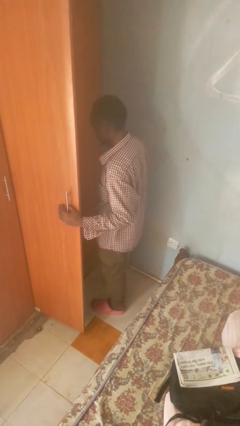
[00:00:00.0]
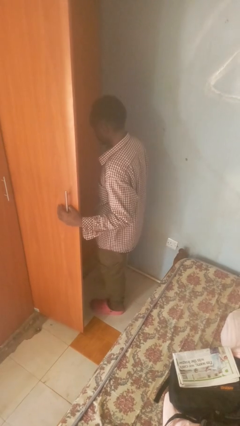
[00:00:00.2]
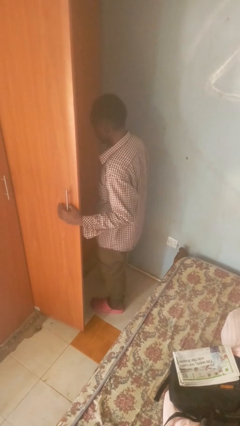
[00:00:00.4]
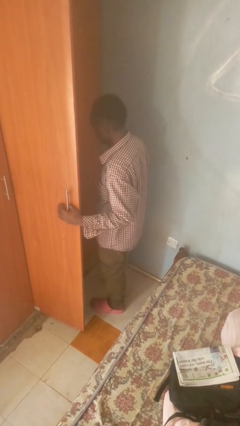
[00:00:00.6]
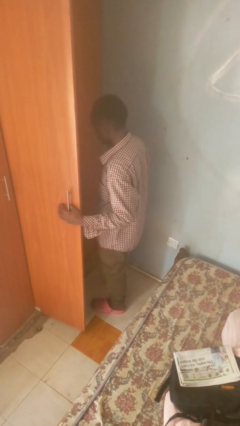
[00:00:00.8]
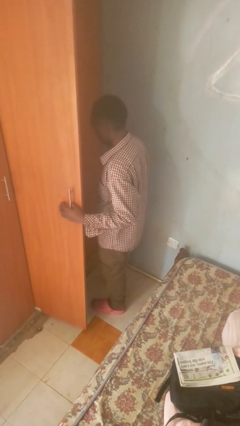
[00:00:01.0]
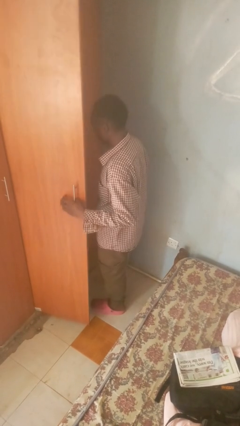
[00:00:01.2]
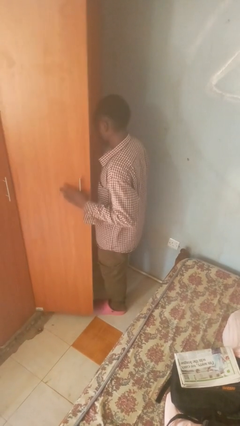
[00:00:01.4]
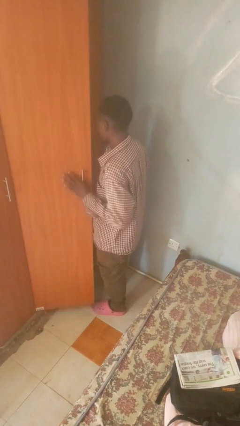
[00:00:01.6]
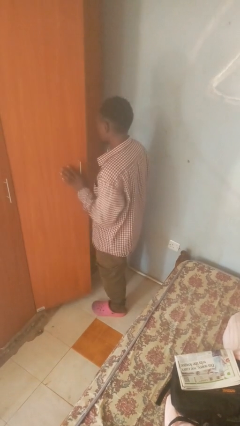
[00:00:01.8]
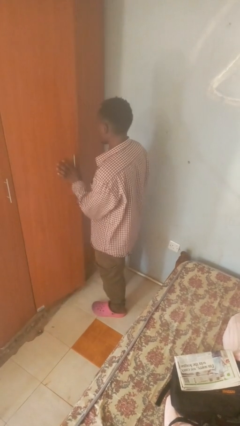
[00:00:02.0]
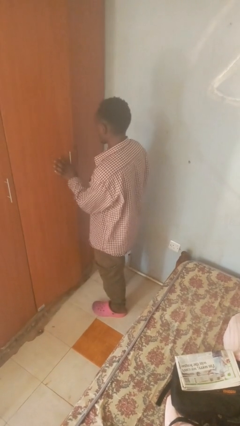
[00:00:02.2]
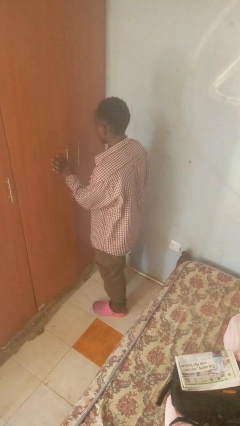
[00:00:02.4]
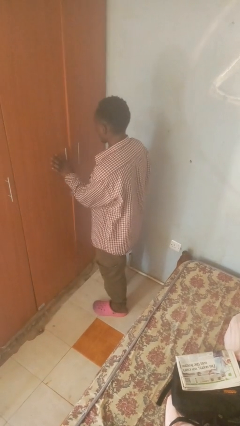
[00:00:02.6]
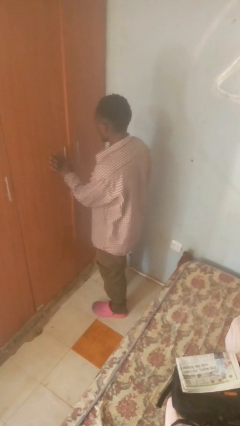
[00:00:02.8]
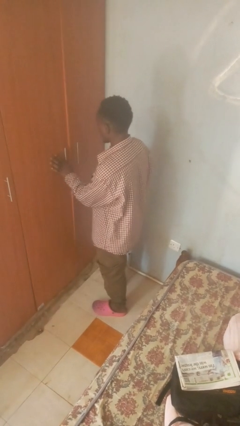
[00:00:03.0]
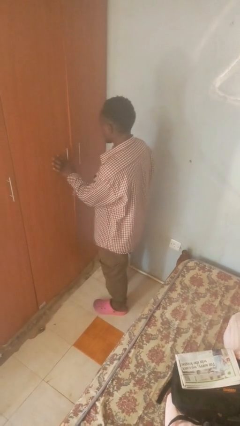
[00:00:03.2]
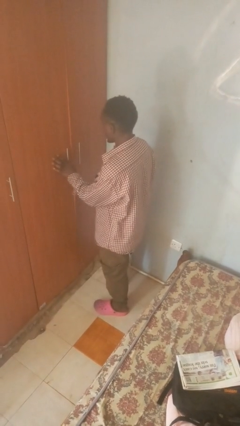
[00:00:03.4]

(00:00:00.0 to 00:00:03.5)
person closes closet door

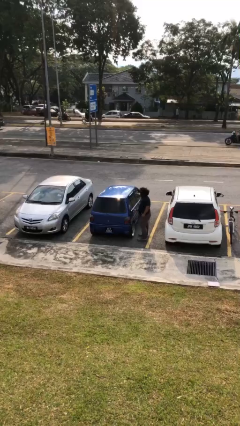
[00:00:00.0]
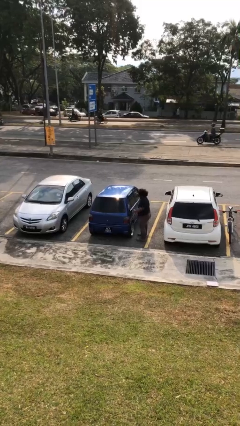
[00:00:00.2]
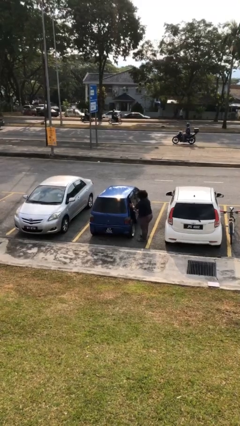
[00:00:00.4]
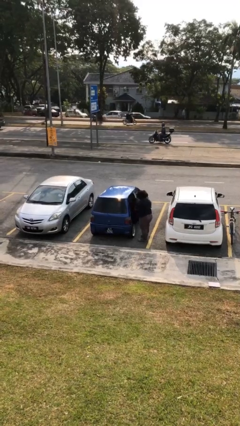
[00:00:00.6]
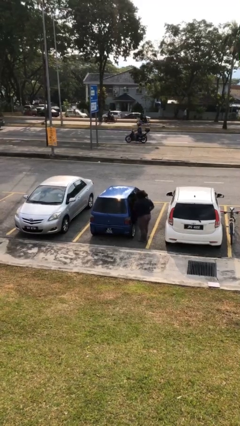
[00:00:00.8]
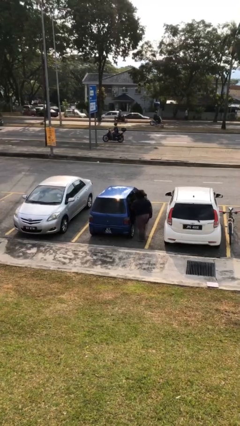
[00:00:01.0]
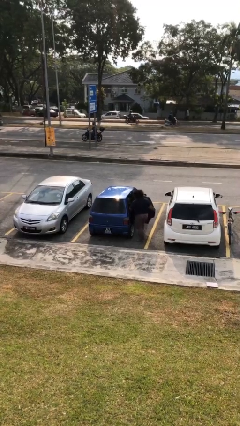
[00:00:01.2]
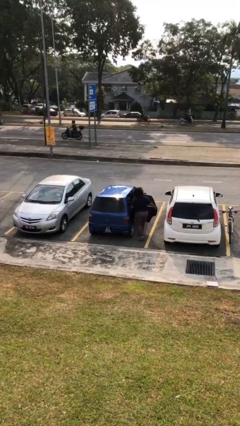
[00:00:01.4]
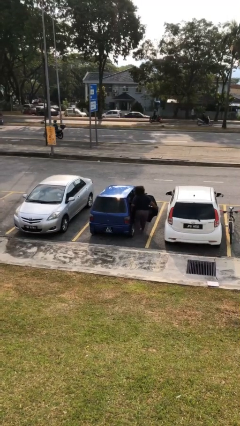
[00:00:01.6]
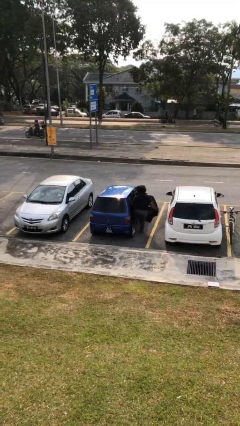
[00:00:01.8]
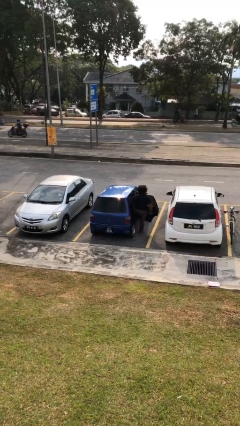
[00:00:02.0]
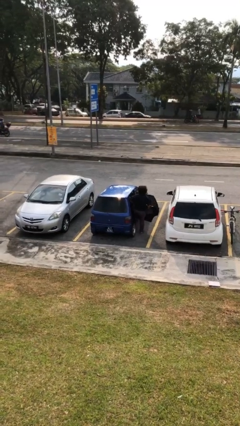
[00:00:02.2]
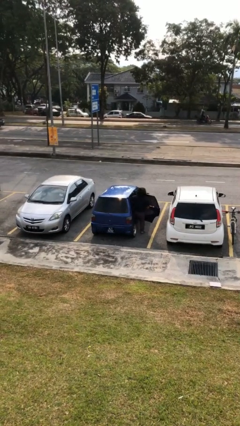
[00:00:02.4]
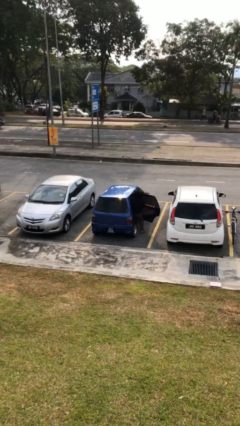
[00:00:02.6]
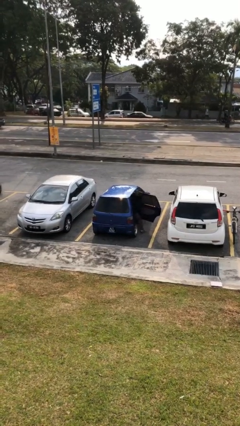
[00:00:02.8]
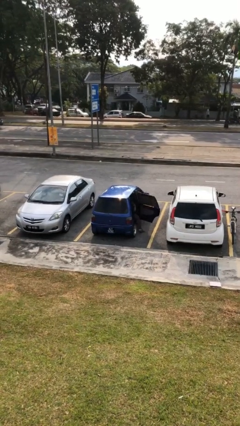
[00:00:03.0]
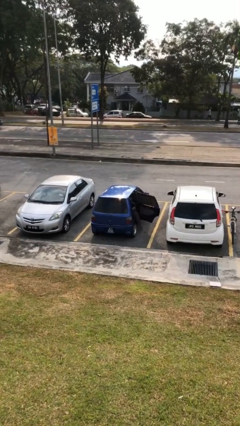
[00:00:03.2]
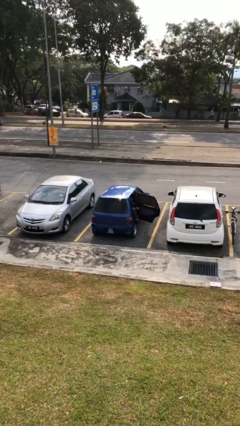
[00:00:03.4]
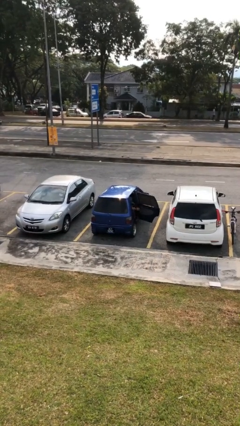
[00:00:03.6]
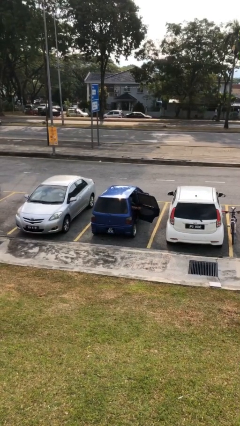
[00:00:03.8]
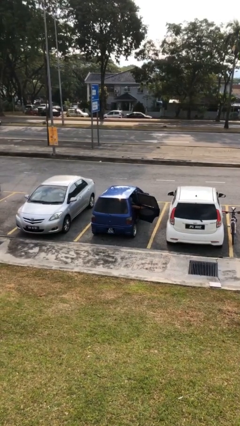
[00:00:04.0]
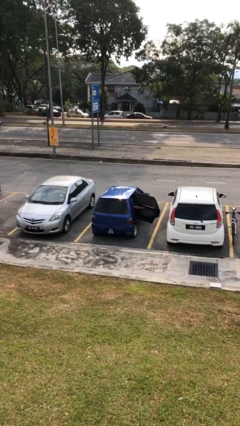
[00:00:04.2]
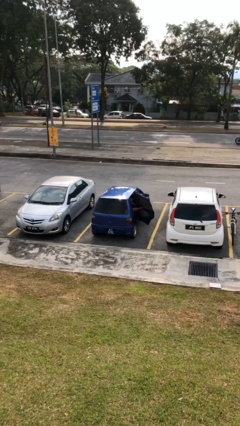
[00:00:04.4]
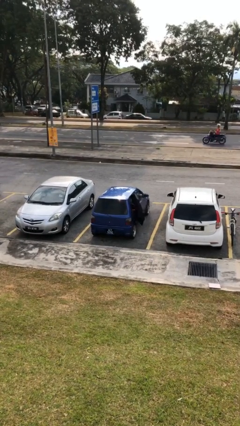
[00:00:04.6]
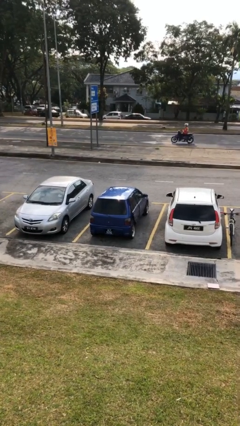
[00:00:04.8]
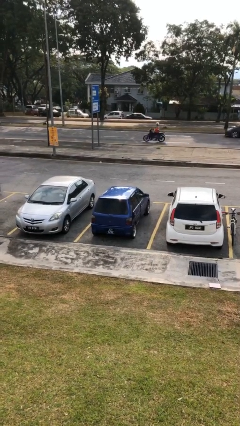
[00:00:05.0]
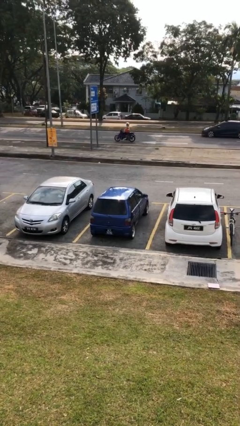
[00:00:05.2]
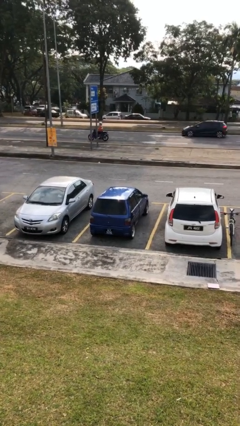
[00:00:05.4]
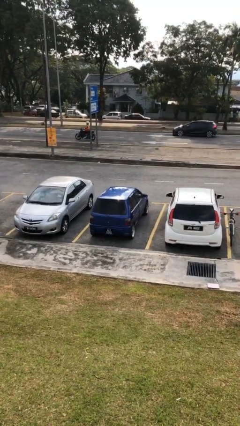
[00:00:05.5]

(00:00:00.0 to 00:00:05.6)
car picks up person

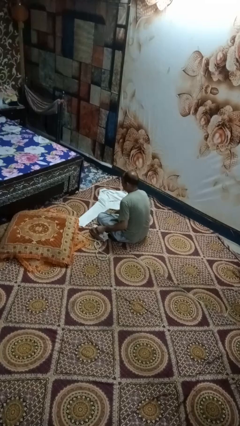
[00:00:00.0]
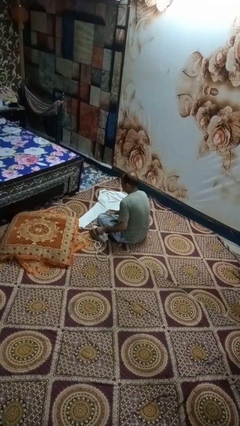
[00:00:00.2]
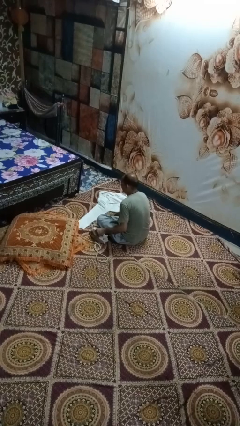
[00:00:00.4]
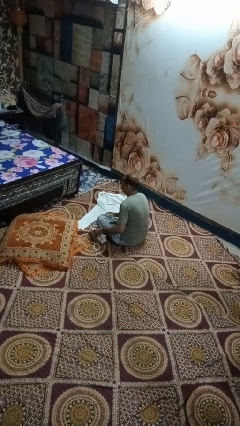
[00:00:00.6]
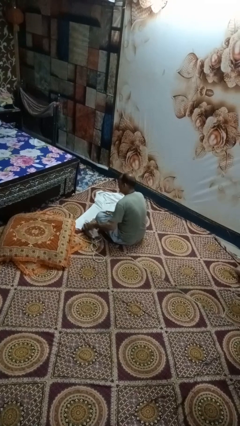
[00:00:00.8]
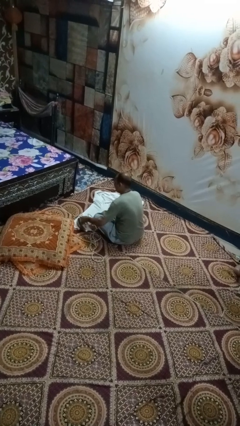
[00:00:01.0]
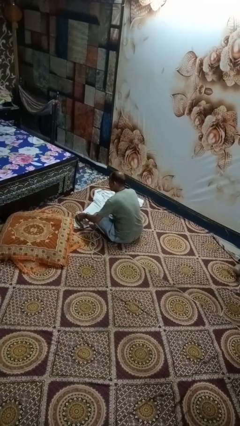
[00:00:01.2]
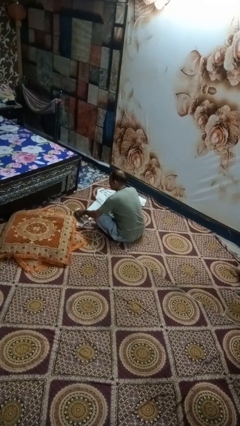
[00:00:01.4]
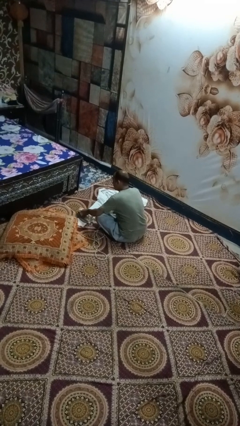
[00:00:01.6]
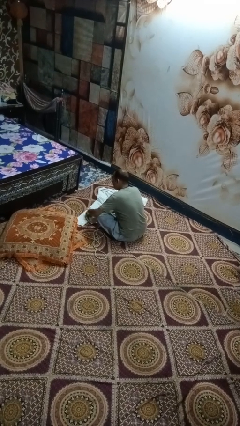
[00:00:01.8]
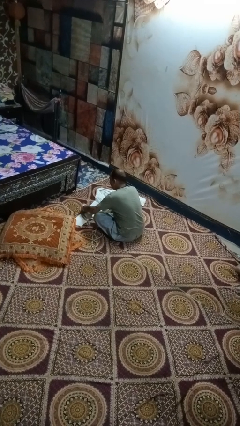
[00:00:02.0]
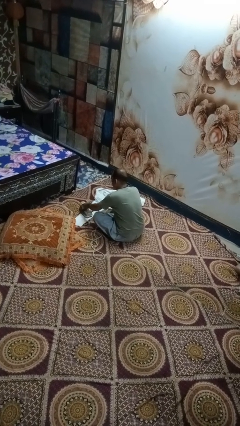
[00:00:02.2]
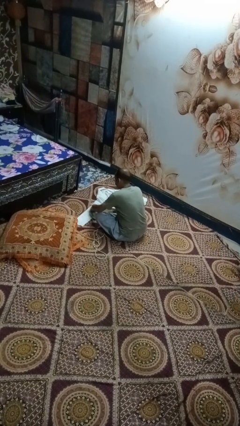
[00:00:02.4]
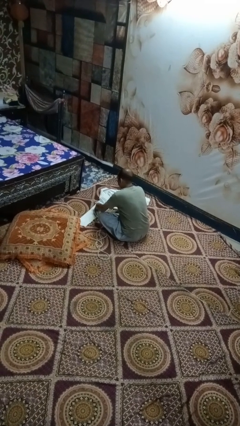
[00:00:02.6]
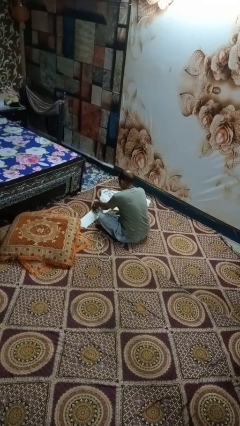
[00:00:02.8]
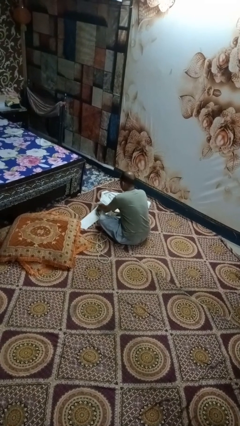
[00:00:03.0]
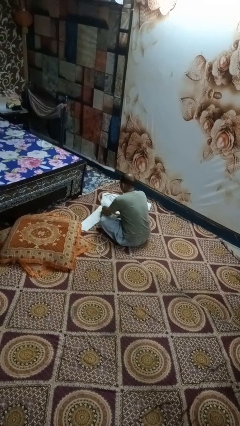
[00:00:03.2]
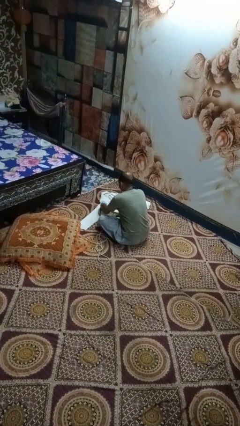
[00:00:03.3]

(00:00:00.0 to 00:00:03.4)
person irons clothes

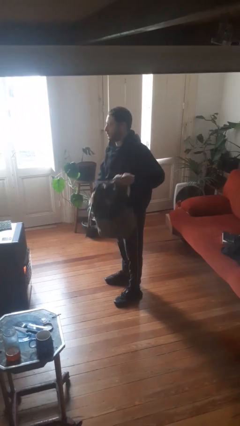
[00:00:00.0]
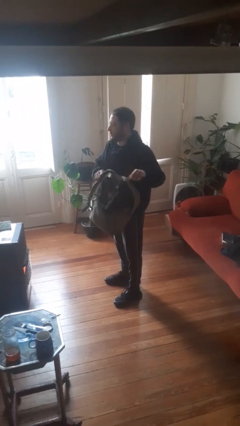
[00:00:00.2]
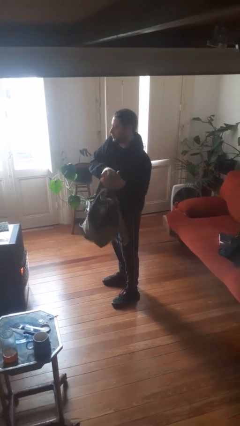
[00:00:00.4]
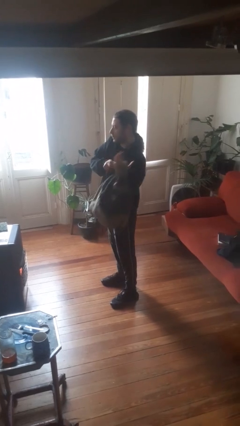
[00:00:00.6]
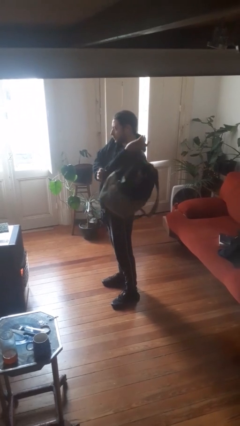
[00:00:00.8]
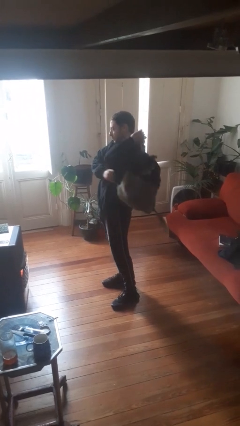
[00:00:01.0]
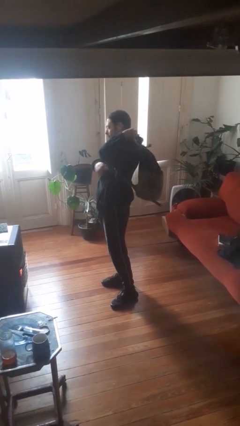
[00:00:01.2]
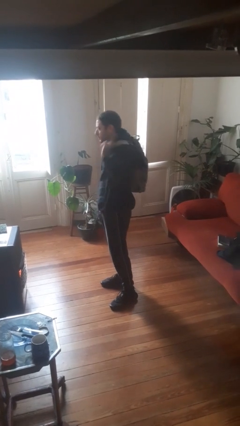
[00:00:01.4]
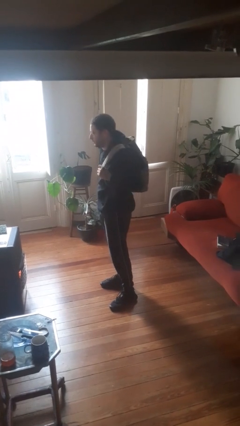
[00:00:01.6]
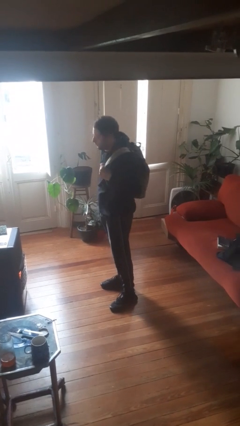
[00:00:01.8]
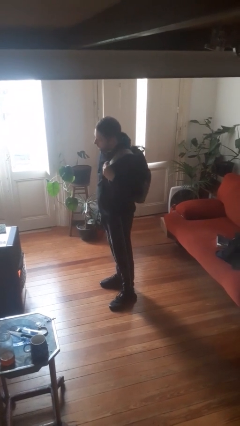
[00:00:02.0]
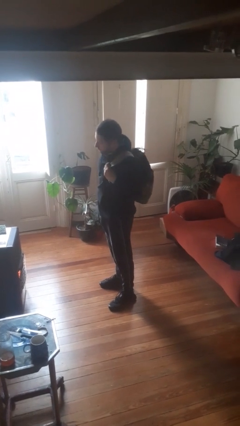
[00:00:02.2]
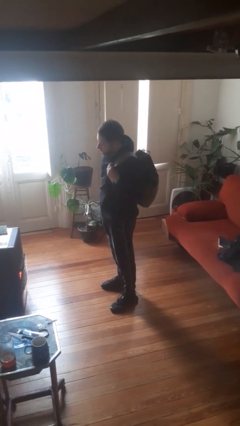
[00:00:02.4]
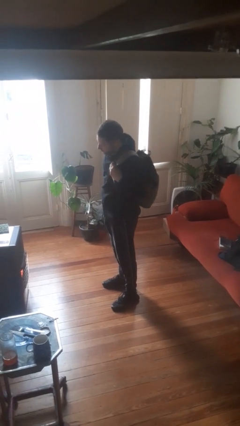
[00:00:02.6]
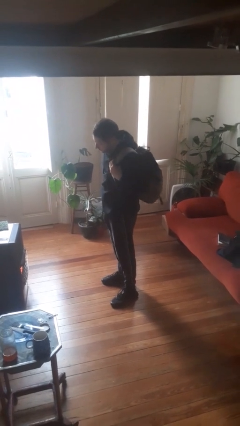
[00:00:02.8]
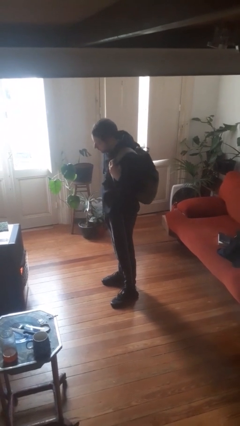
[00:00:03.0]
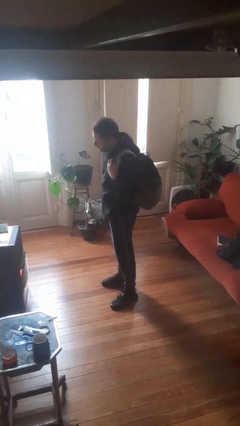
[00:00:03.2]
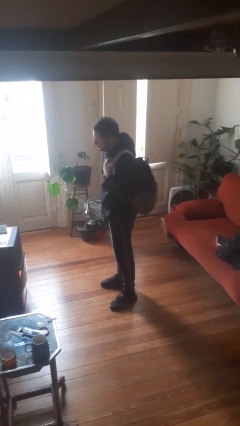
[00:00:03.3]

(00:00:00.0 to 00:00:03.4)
person puts on backpack

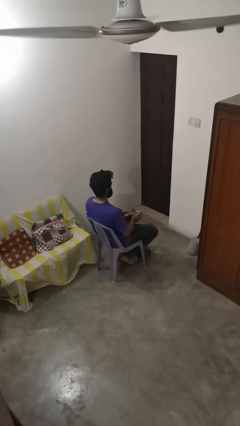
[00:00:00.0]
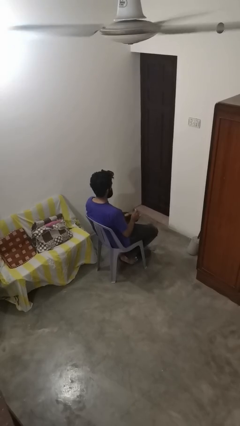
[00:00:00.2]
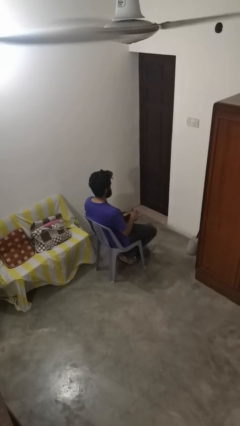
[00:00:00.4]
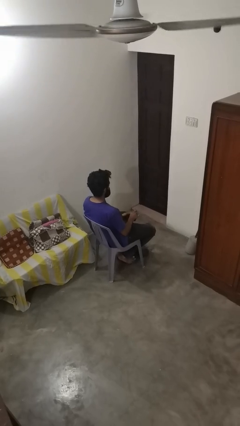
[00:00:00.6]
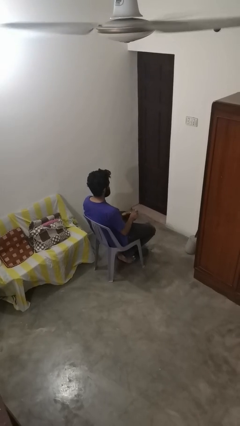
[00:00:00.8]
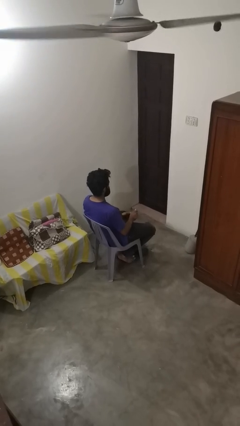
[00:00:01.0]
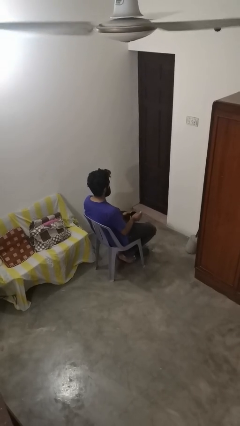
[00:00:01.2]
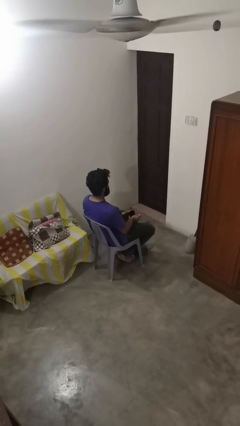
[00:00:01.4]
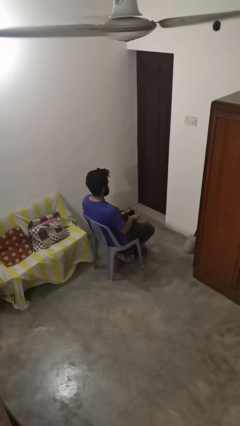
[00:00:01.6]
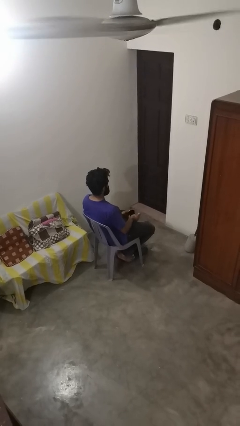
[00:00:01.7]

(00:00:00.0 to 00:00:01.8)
person stirs mug
